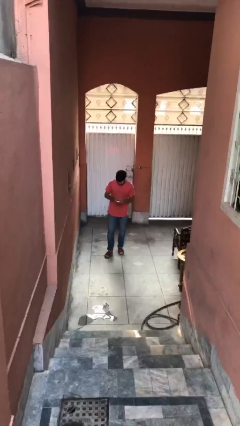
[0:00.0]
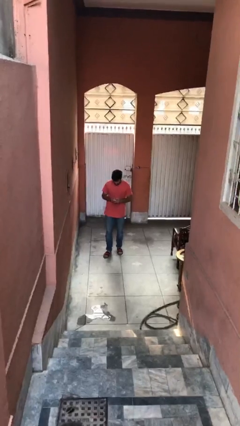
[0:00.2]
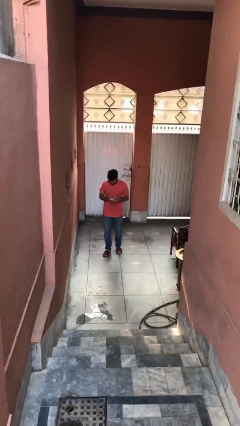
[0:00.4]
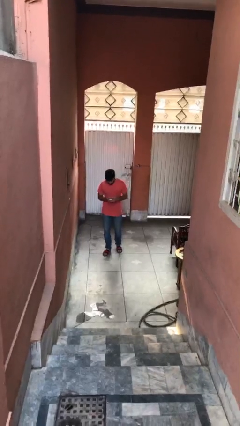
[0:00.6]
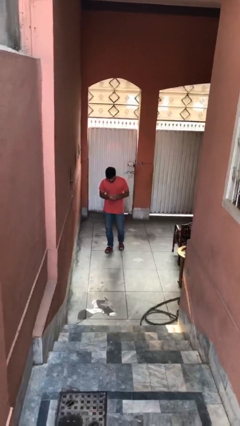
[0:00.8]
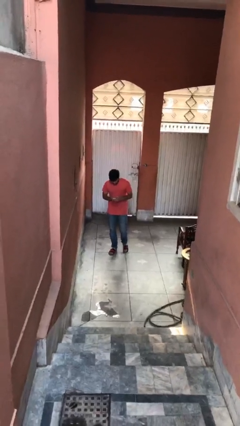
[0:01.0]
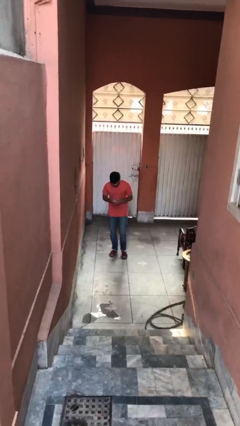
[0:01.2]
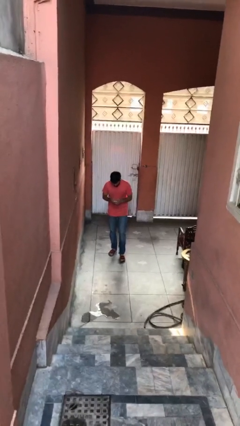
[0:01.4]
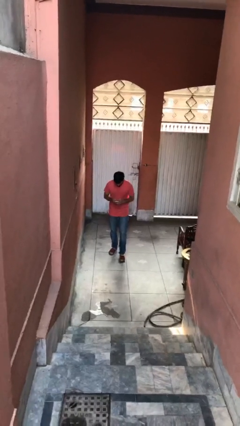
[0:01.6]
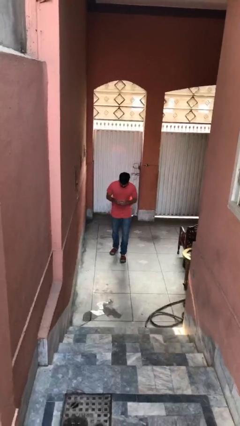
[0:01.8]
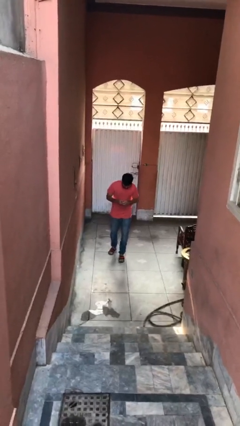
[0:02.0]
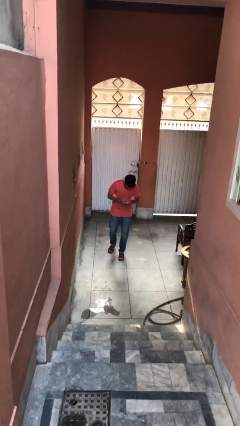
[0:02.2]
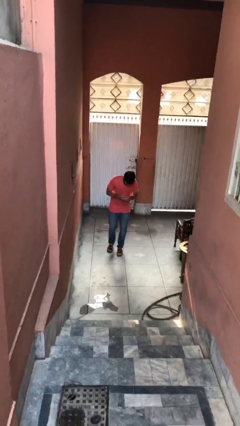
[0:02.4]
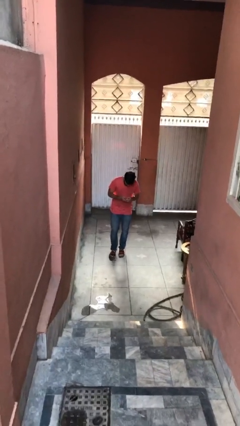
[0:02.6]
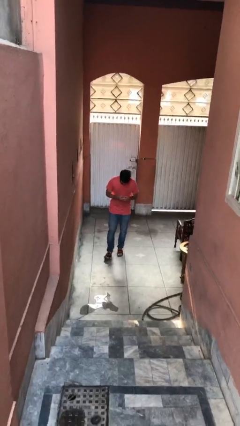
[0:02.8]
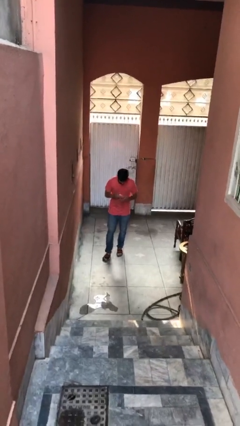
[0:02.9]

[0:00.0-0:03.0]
person texts on phone

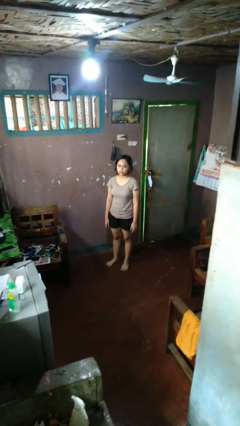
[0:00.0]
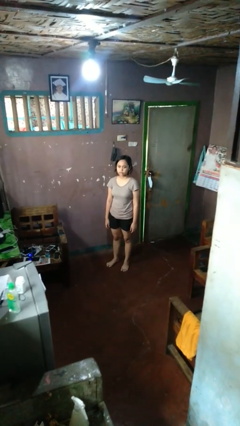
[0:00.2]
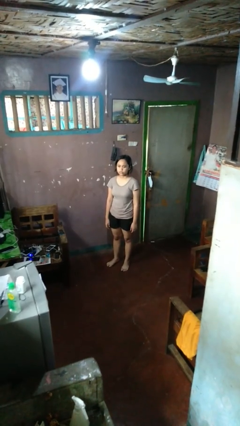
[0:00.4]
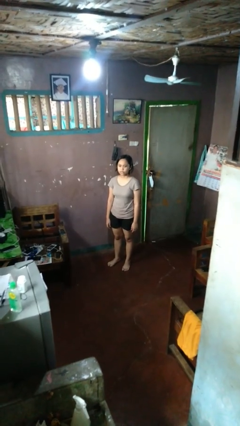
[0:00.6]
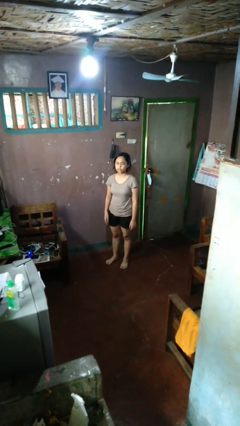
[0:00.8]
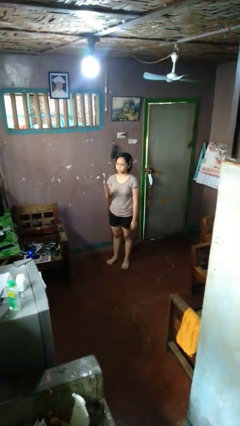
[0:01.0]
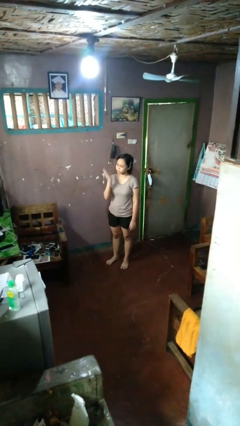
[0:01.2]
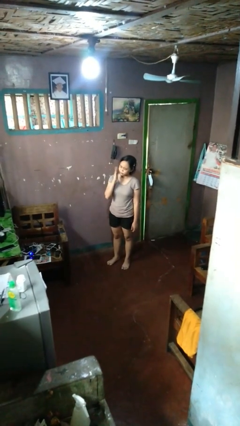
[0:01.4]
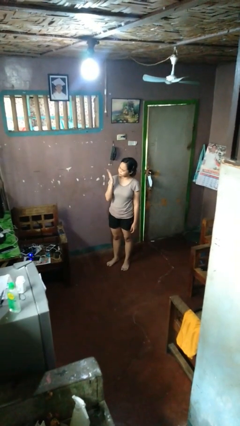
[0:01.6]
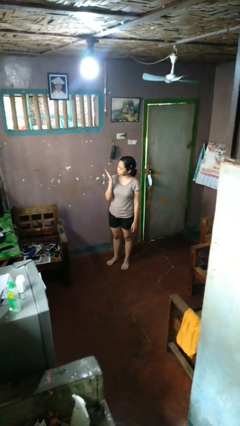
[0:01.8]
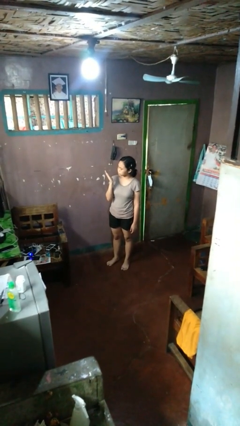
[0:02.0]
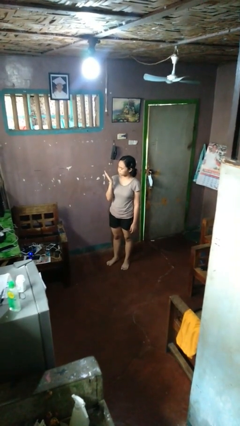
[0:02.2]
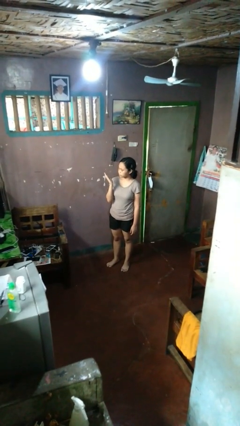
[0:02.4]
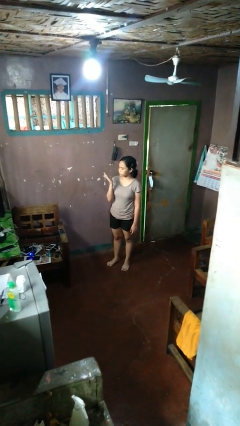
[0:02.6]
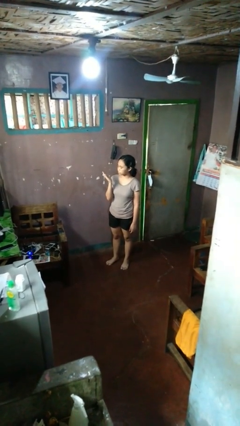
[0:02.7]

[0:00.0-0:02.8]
person swats bug

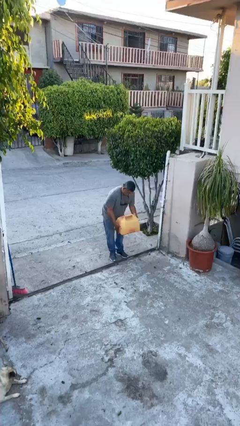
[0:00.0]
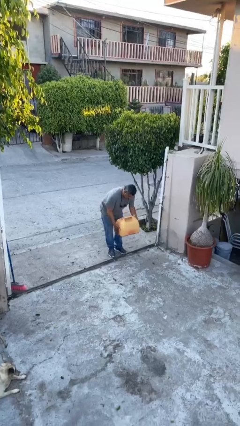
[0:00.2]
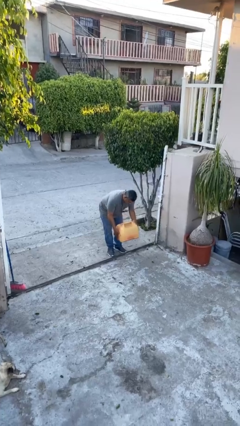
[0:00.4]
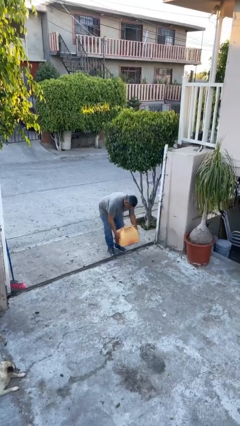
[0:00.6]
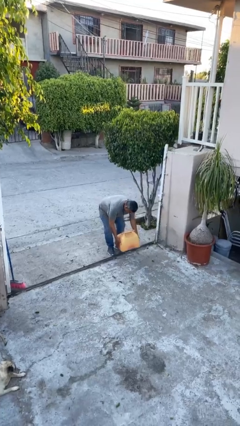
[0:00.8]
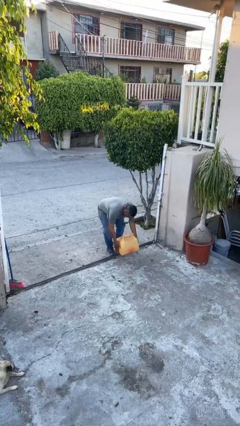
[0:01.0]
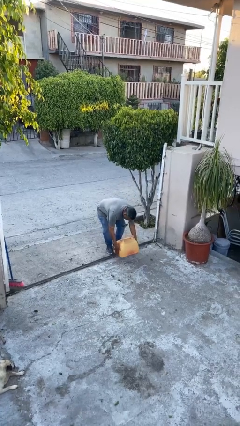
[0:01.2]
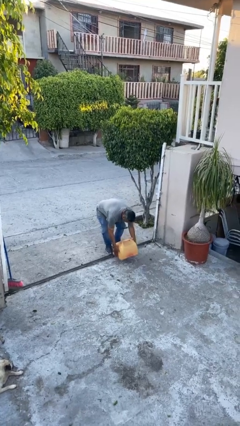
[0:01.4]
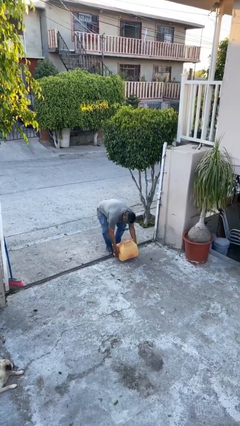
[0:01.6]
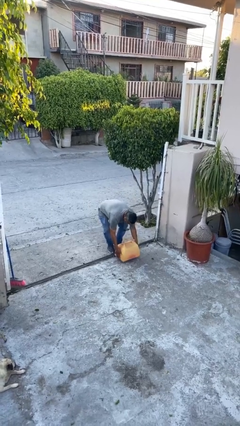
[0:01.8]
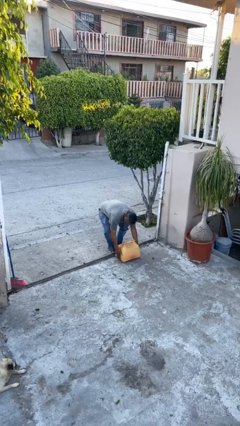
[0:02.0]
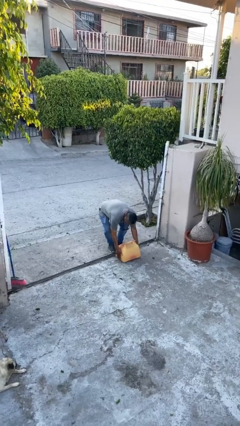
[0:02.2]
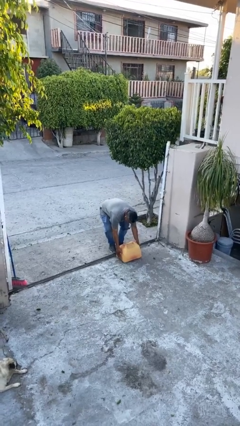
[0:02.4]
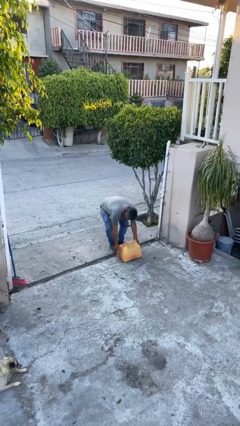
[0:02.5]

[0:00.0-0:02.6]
person puts down object on floor

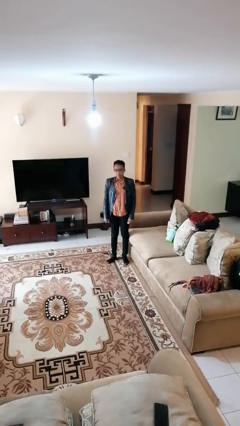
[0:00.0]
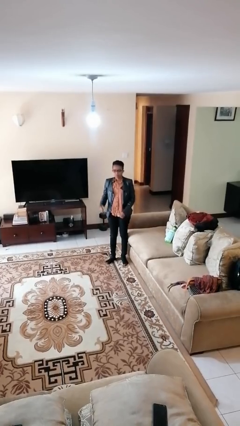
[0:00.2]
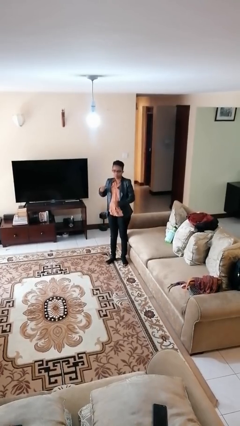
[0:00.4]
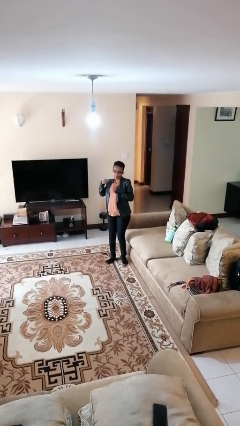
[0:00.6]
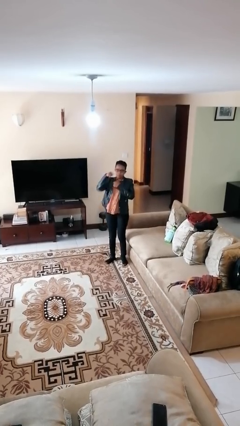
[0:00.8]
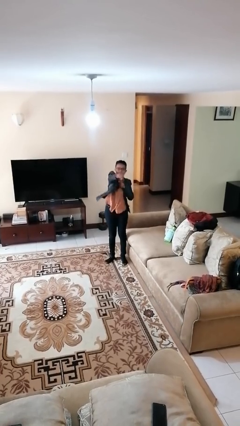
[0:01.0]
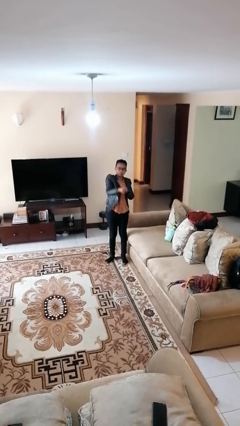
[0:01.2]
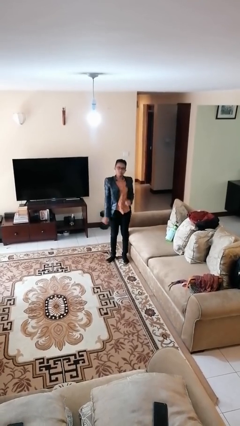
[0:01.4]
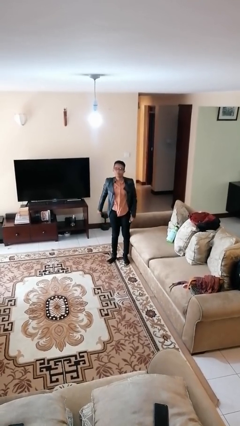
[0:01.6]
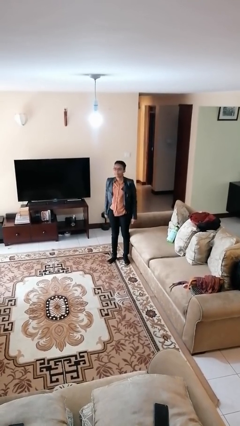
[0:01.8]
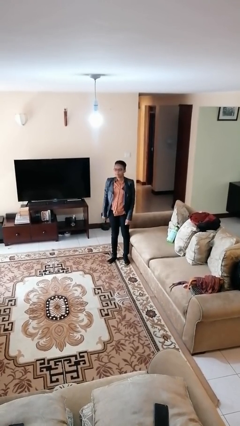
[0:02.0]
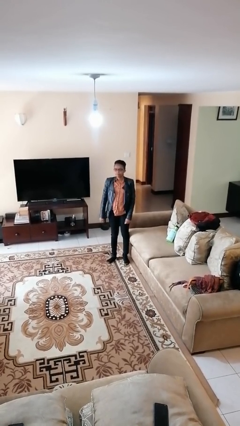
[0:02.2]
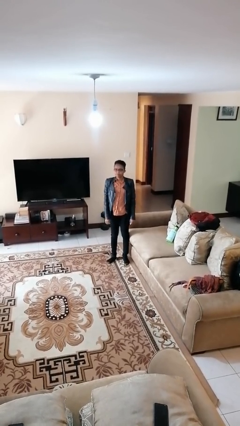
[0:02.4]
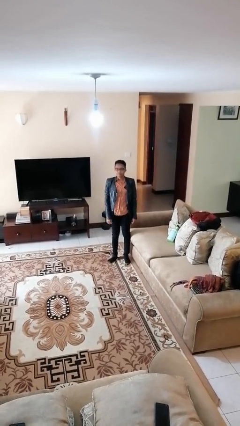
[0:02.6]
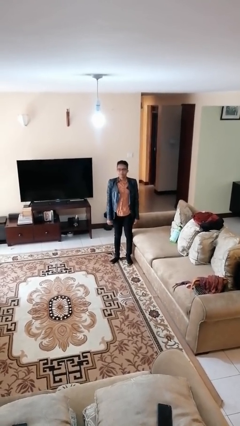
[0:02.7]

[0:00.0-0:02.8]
person punches

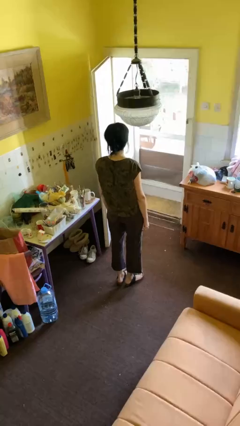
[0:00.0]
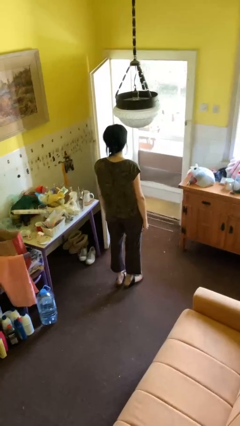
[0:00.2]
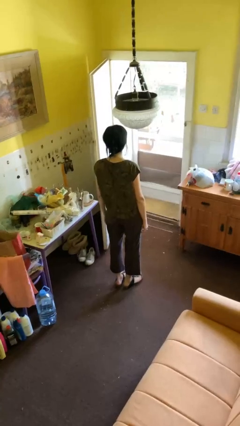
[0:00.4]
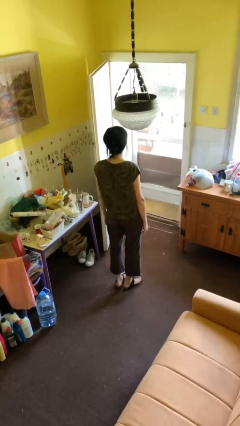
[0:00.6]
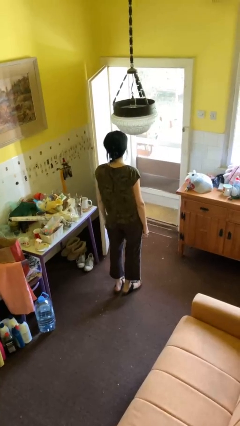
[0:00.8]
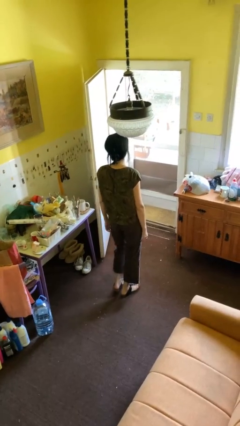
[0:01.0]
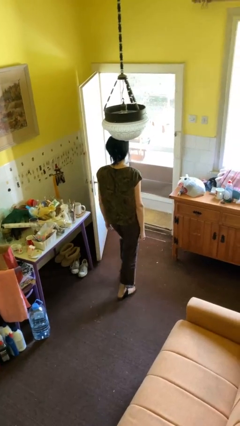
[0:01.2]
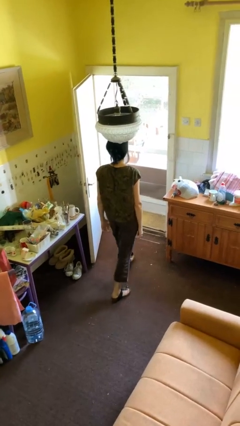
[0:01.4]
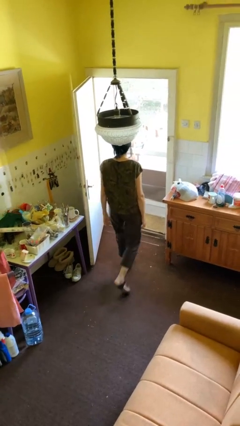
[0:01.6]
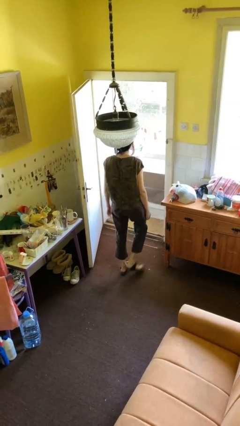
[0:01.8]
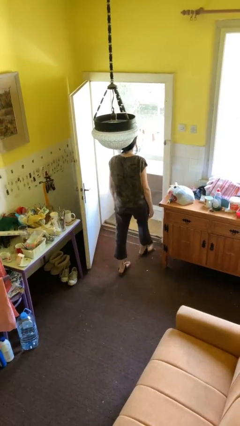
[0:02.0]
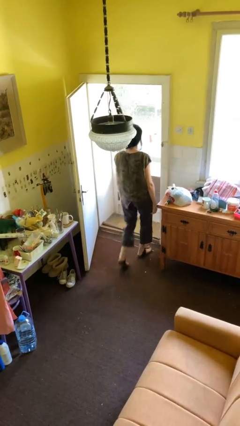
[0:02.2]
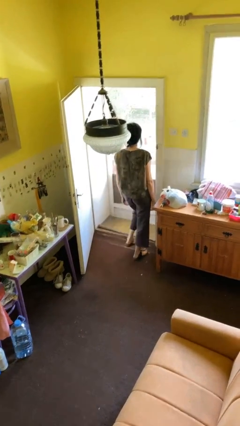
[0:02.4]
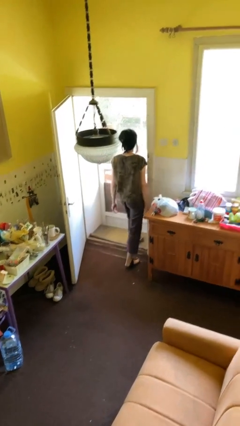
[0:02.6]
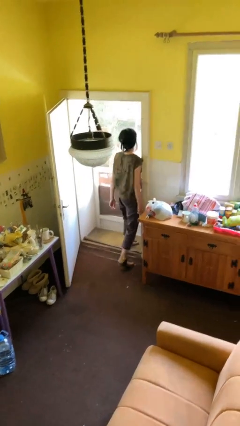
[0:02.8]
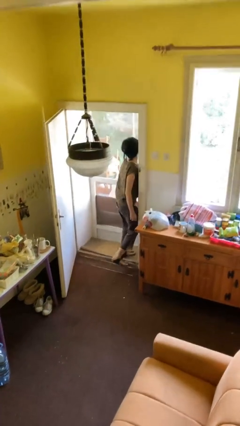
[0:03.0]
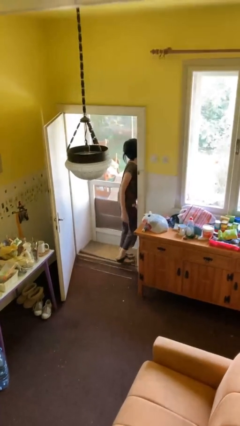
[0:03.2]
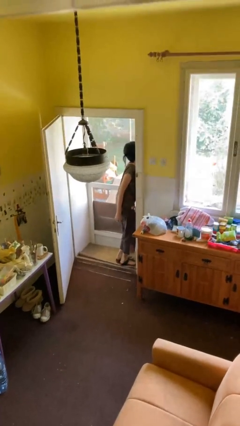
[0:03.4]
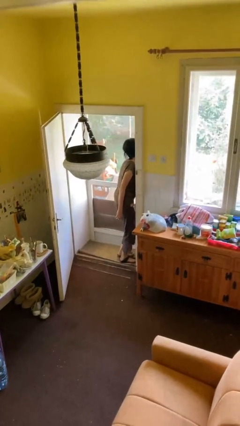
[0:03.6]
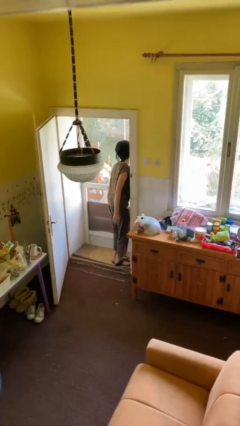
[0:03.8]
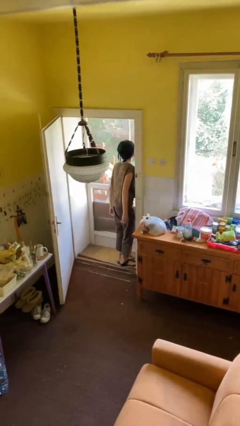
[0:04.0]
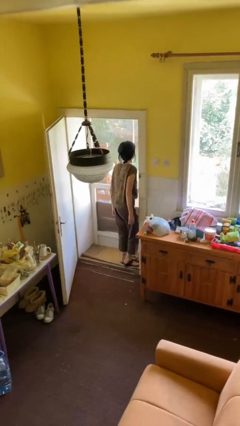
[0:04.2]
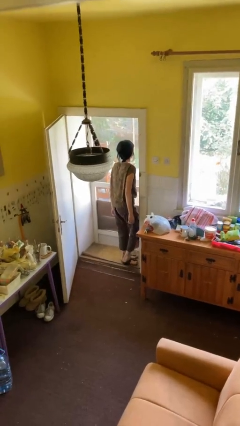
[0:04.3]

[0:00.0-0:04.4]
person bumps into wall

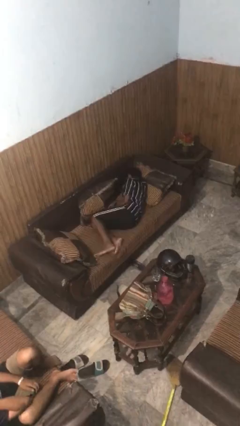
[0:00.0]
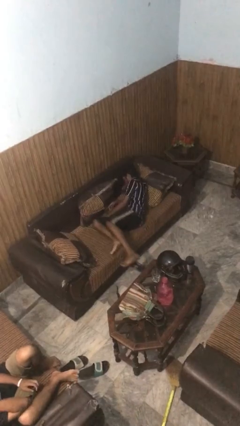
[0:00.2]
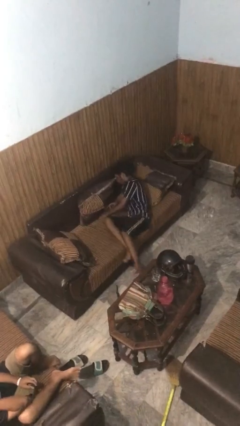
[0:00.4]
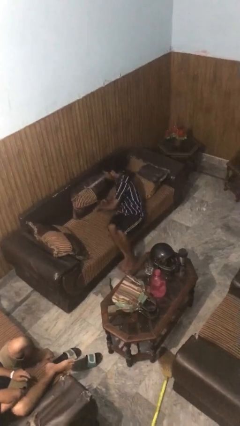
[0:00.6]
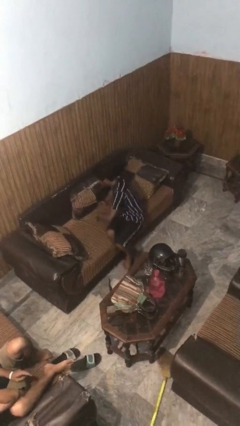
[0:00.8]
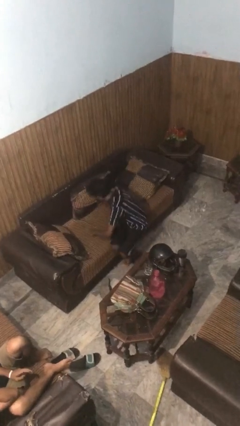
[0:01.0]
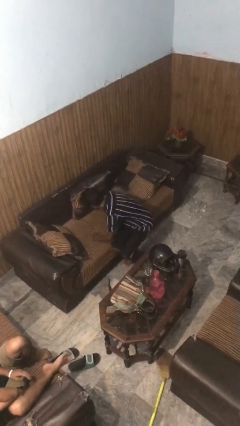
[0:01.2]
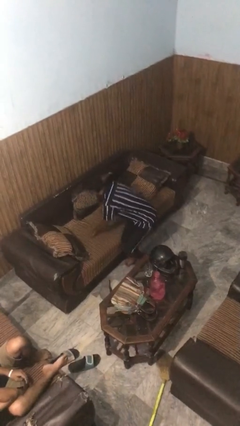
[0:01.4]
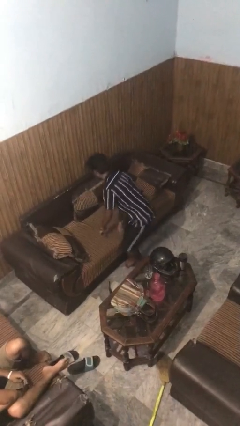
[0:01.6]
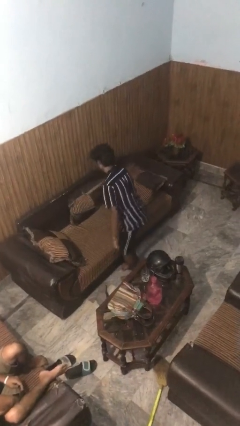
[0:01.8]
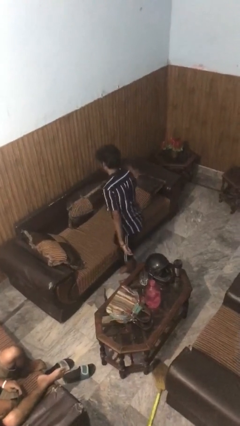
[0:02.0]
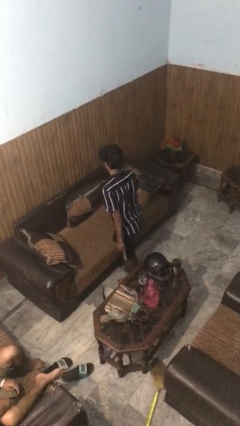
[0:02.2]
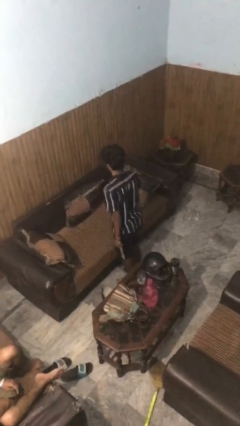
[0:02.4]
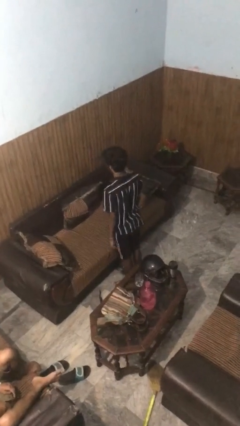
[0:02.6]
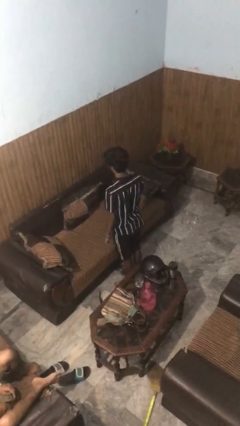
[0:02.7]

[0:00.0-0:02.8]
person stands up
